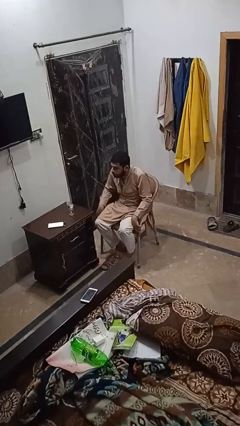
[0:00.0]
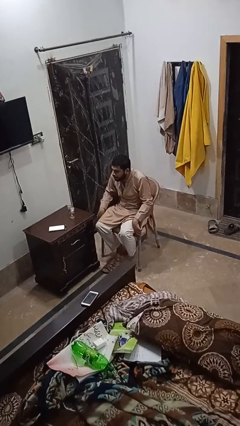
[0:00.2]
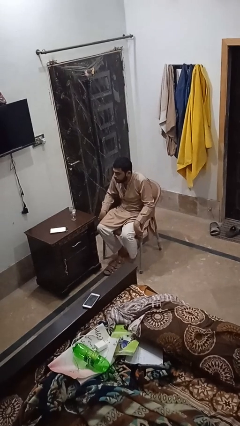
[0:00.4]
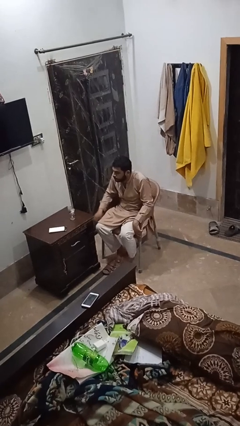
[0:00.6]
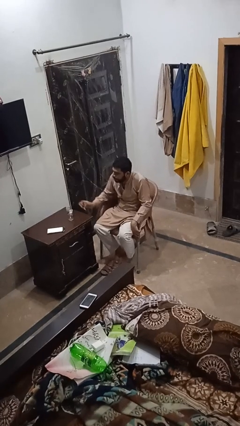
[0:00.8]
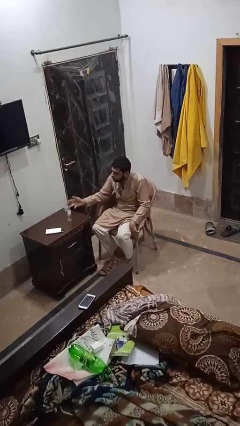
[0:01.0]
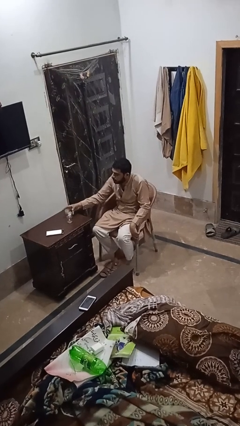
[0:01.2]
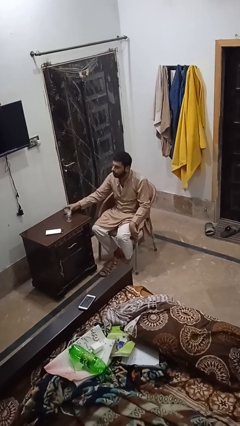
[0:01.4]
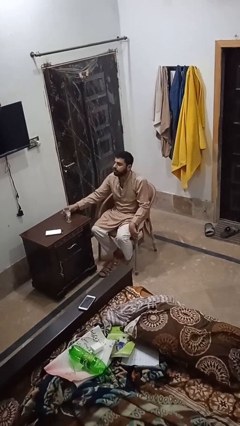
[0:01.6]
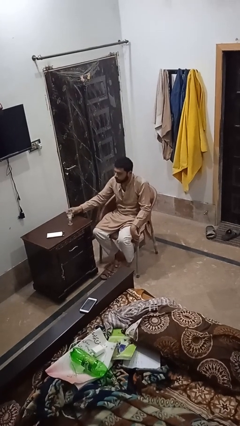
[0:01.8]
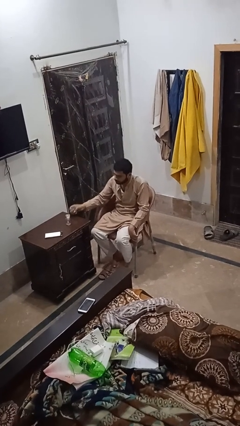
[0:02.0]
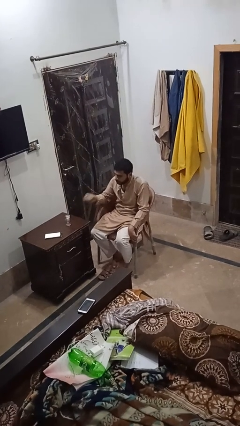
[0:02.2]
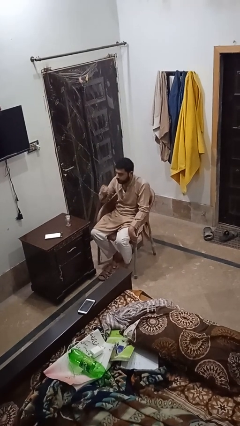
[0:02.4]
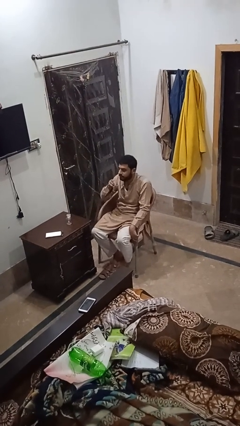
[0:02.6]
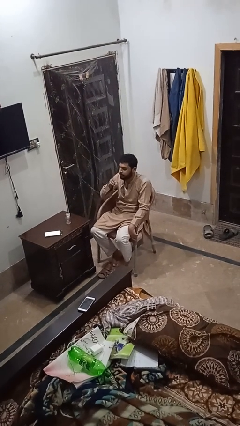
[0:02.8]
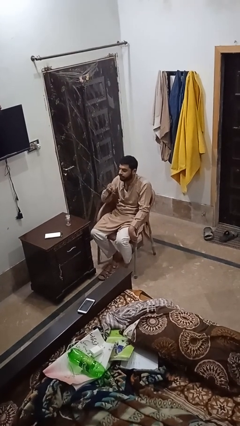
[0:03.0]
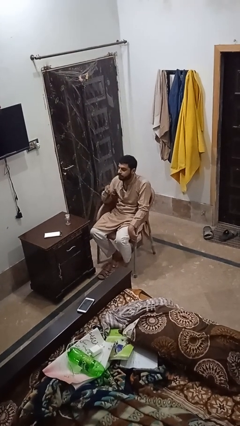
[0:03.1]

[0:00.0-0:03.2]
person picks up object from table

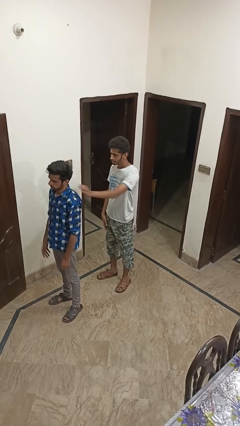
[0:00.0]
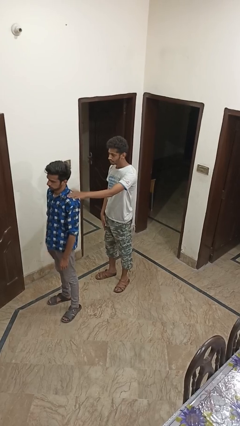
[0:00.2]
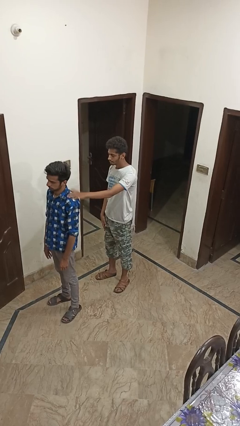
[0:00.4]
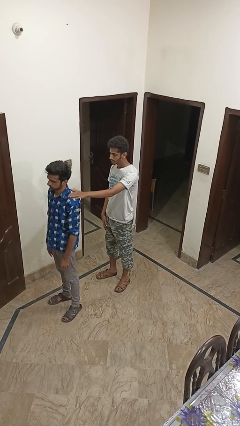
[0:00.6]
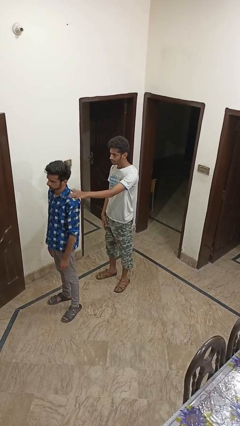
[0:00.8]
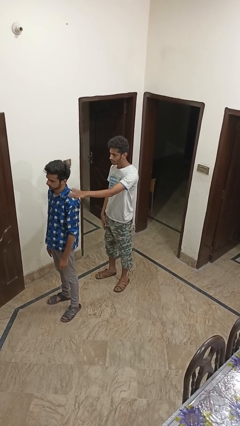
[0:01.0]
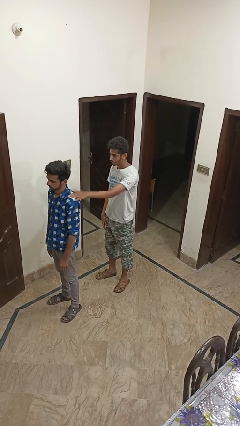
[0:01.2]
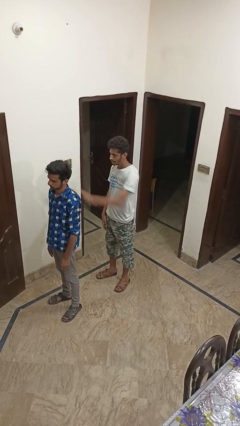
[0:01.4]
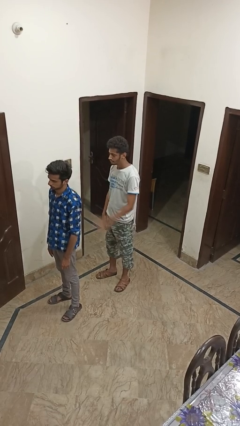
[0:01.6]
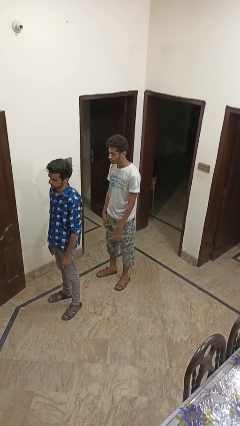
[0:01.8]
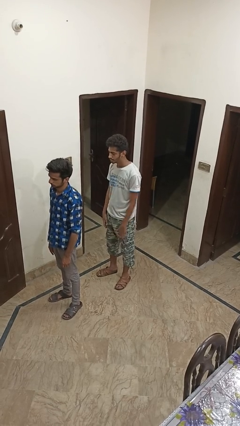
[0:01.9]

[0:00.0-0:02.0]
person touches back of person

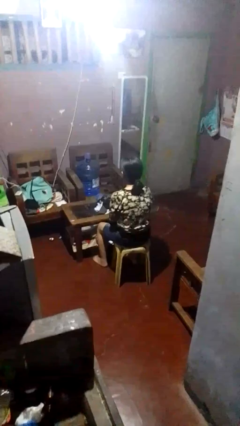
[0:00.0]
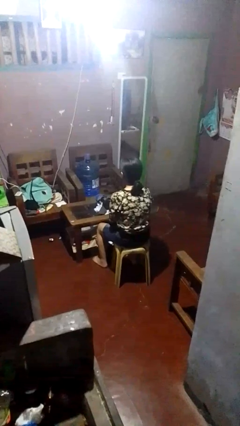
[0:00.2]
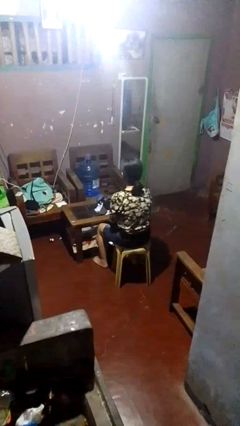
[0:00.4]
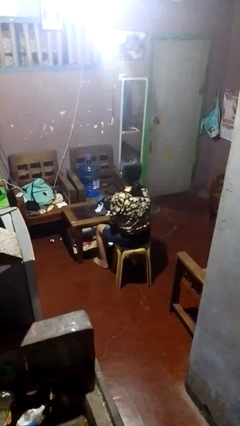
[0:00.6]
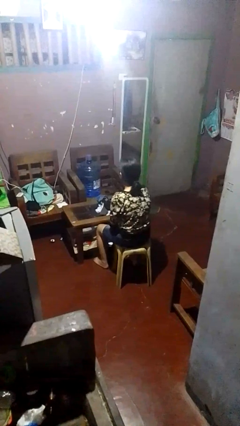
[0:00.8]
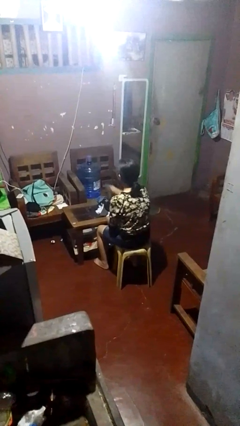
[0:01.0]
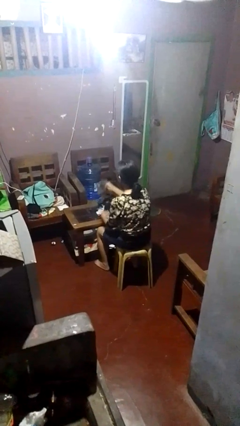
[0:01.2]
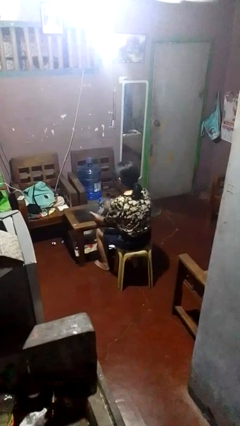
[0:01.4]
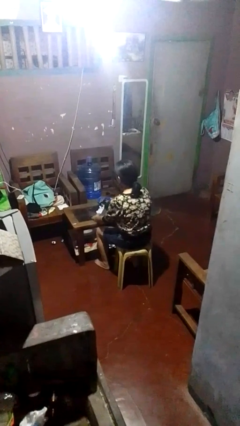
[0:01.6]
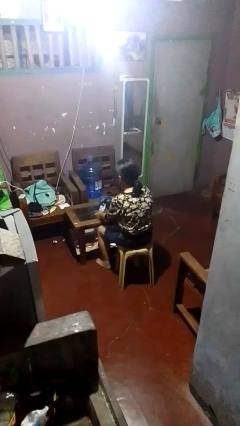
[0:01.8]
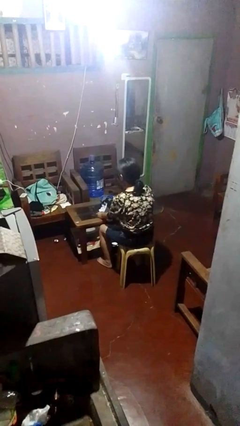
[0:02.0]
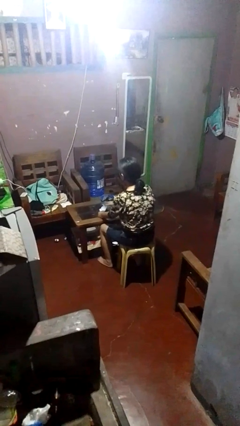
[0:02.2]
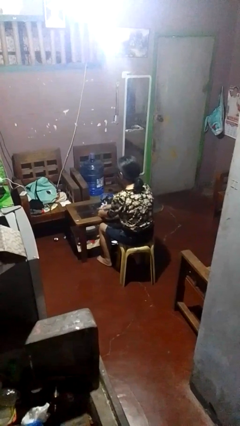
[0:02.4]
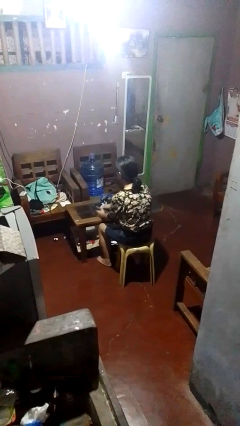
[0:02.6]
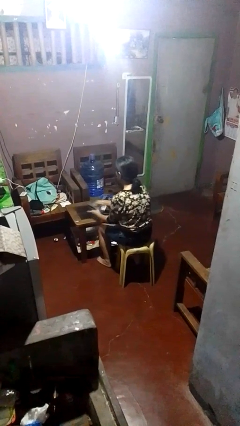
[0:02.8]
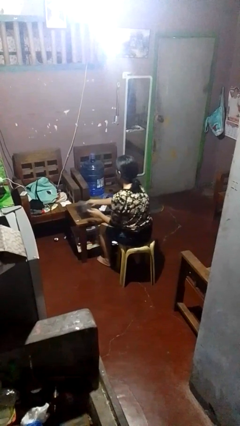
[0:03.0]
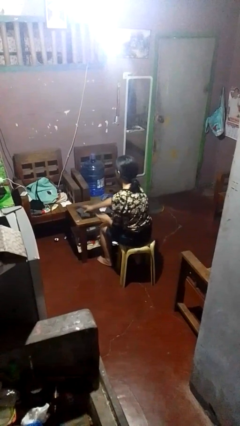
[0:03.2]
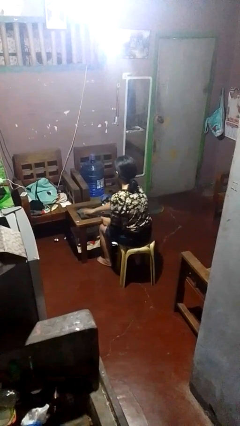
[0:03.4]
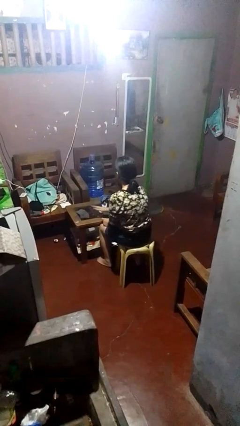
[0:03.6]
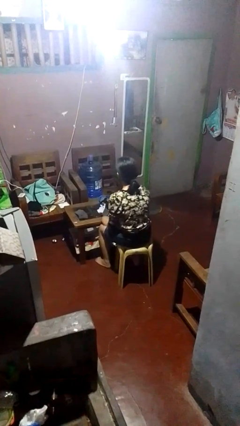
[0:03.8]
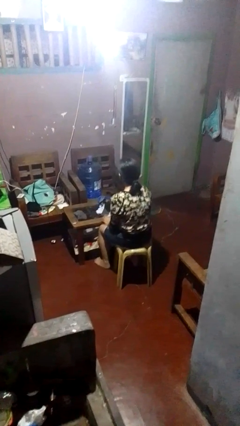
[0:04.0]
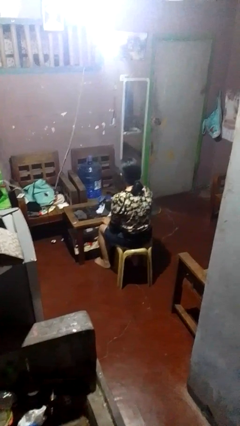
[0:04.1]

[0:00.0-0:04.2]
person folds socks

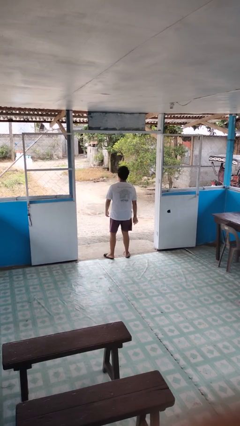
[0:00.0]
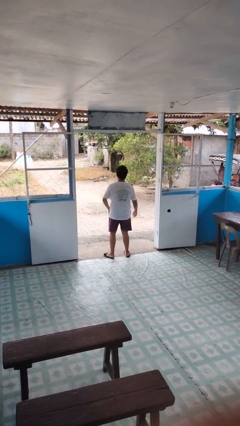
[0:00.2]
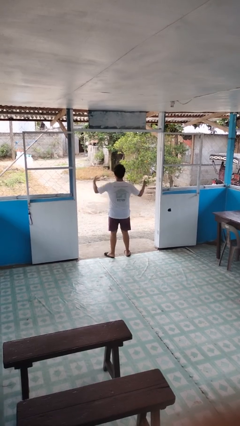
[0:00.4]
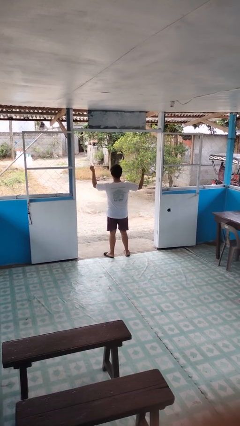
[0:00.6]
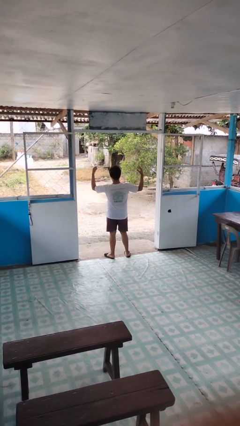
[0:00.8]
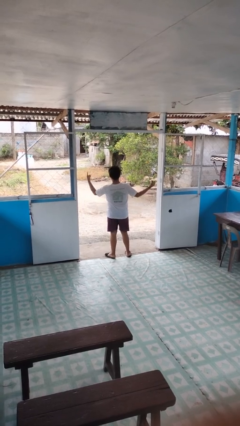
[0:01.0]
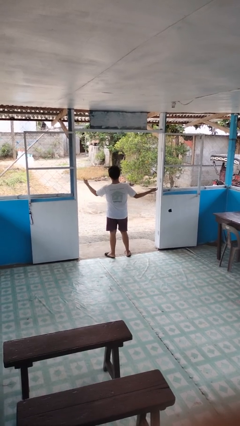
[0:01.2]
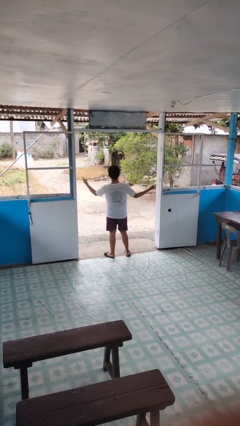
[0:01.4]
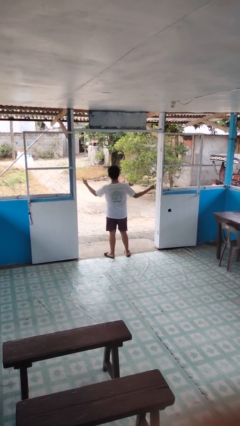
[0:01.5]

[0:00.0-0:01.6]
person snaps fingers

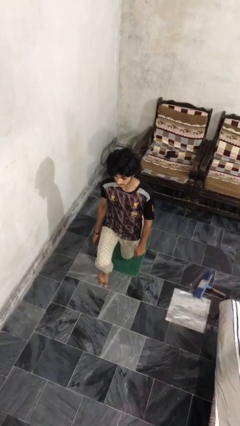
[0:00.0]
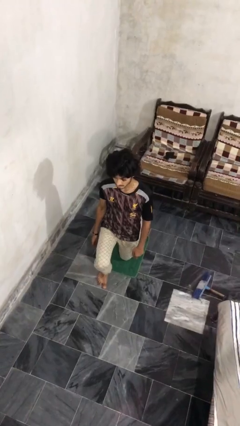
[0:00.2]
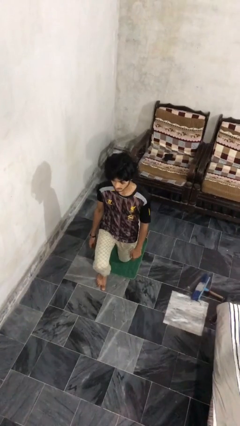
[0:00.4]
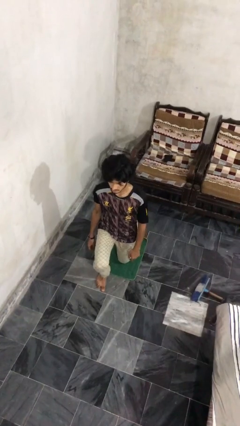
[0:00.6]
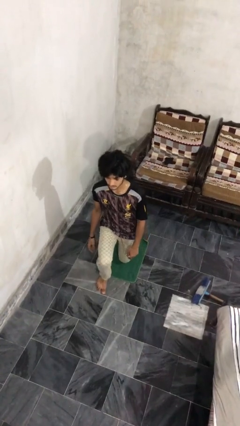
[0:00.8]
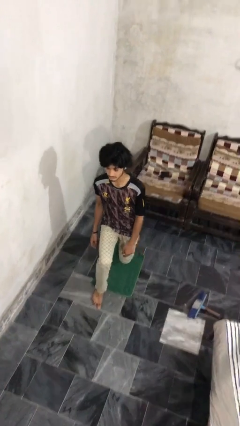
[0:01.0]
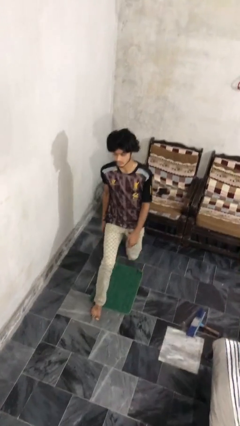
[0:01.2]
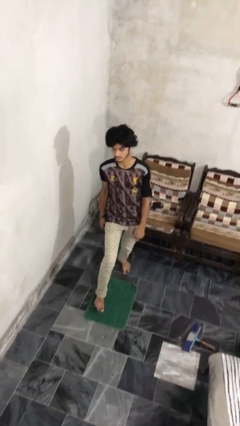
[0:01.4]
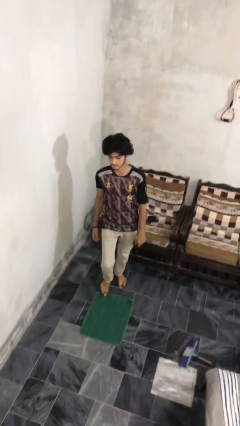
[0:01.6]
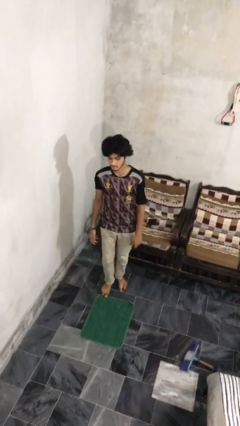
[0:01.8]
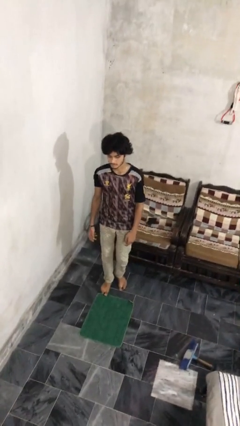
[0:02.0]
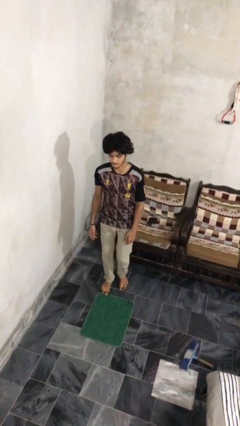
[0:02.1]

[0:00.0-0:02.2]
person stands up from floor

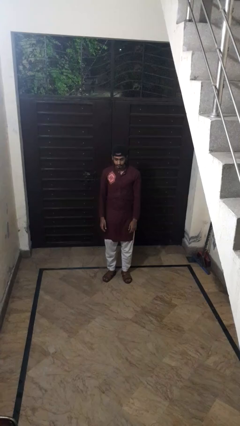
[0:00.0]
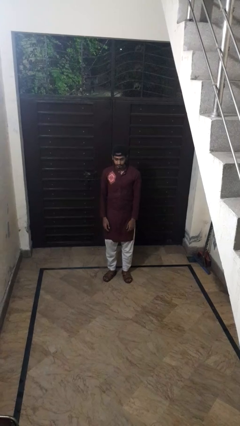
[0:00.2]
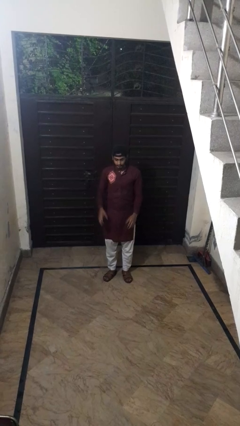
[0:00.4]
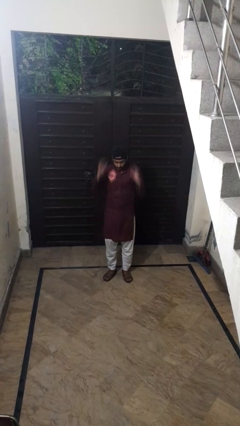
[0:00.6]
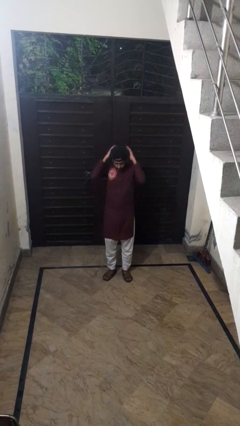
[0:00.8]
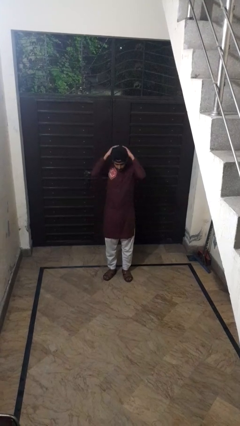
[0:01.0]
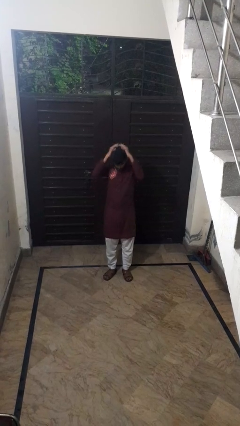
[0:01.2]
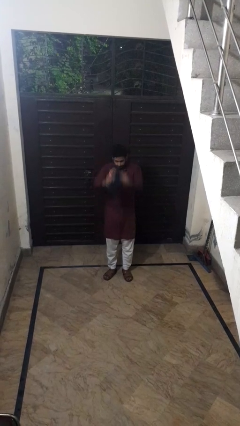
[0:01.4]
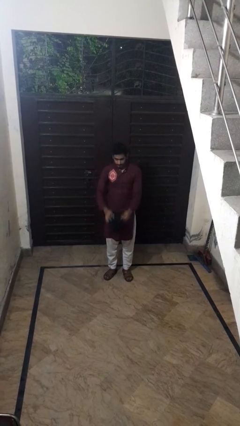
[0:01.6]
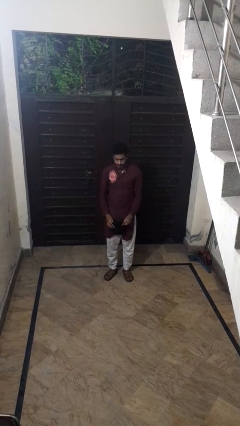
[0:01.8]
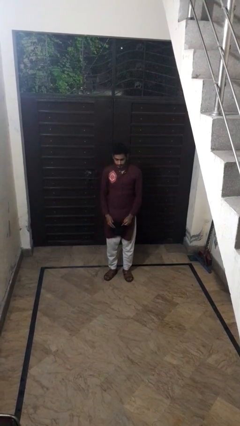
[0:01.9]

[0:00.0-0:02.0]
person takes off hat

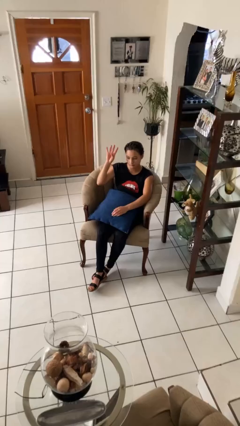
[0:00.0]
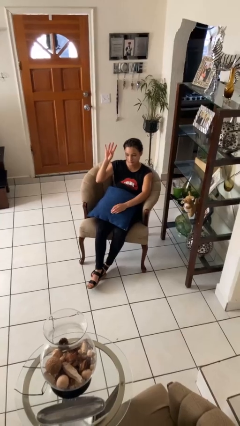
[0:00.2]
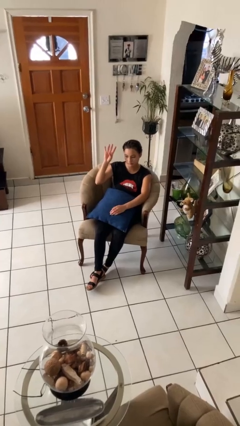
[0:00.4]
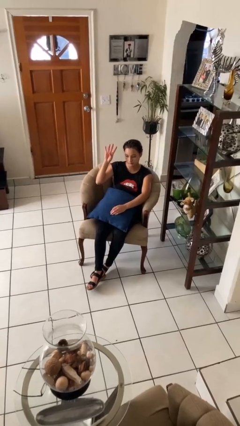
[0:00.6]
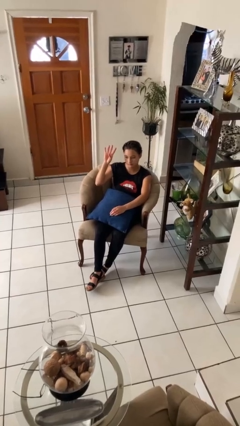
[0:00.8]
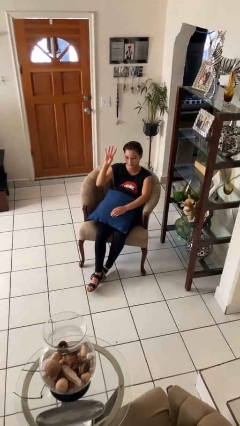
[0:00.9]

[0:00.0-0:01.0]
person gestures number four

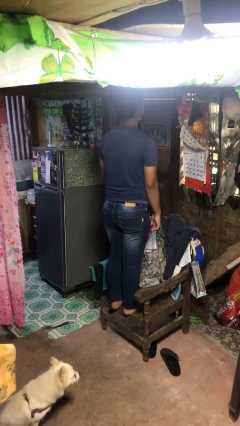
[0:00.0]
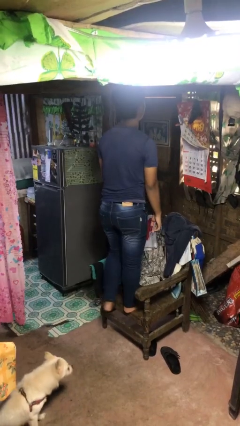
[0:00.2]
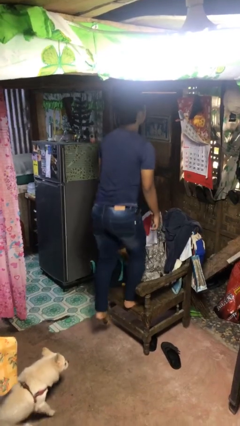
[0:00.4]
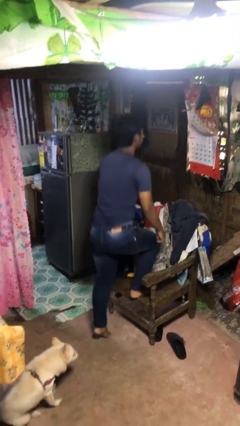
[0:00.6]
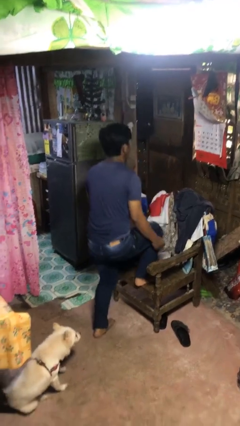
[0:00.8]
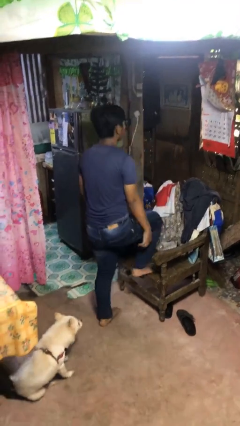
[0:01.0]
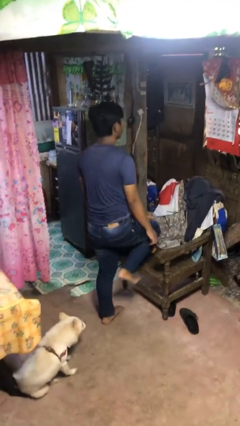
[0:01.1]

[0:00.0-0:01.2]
person climbs off chair
